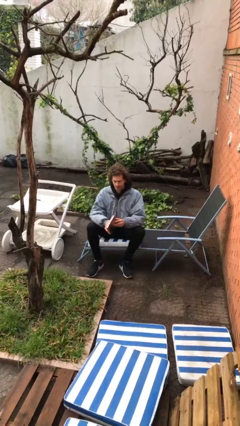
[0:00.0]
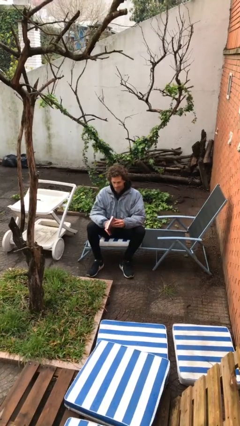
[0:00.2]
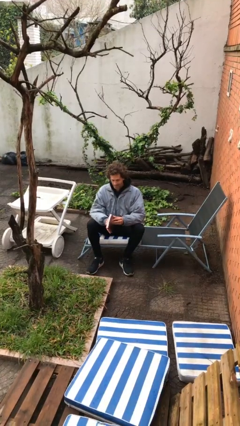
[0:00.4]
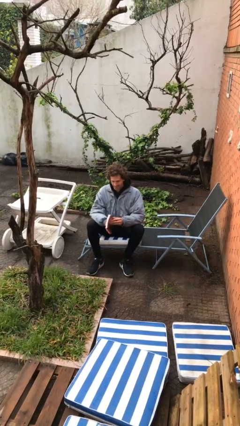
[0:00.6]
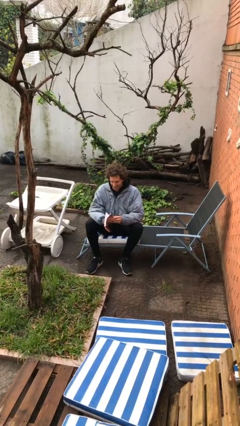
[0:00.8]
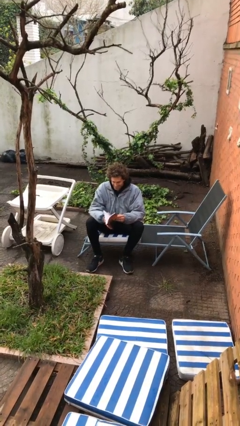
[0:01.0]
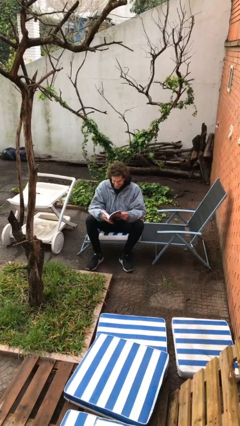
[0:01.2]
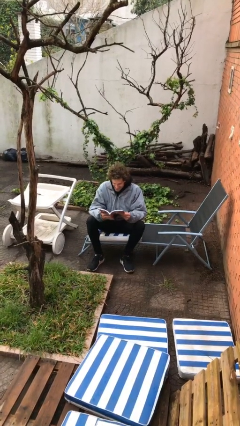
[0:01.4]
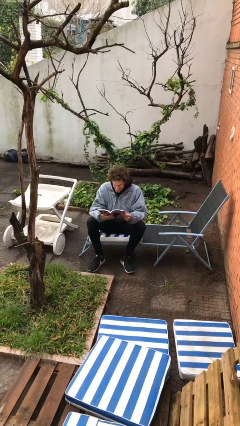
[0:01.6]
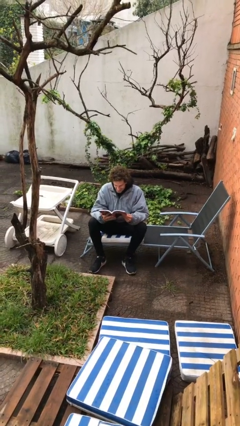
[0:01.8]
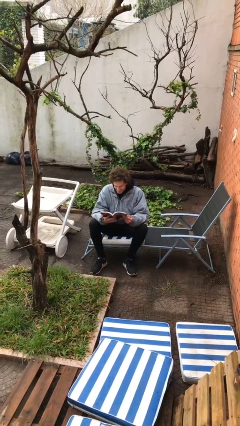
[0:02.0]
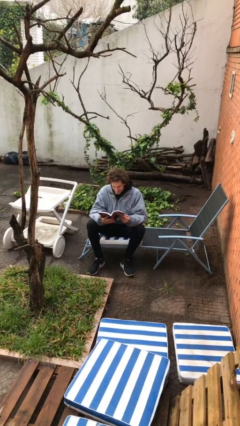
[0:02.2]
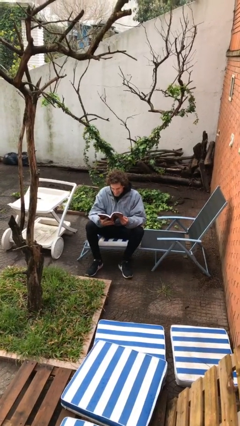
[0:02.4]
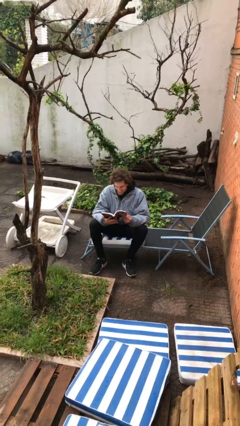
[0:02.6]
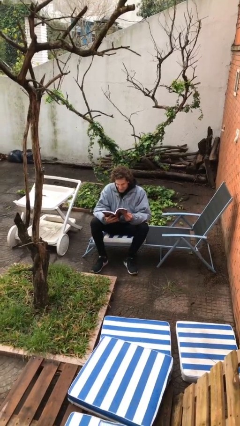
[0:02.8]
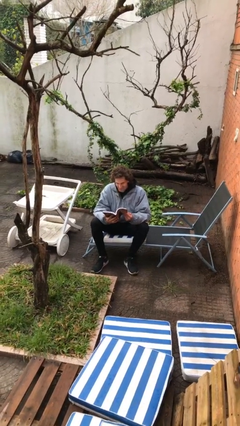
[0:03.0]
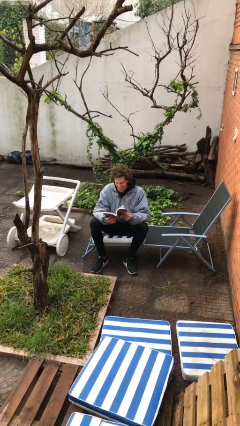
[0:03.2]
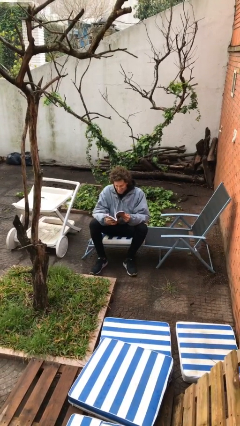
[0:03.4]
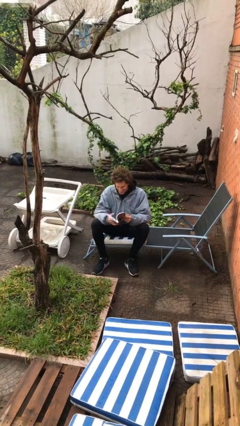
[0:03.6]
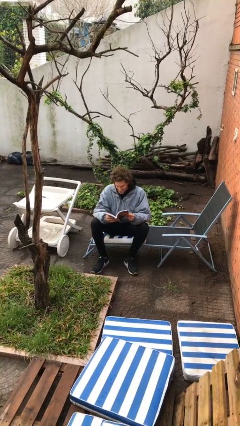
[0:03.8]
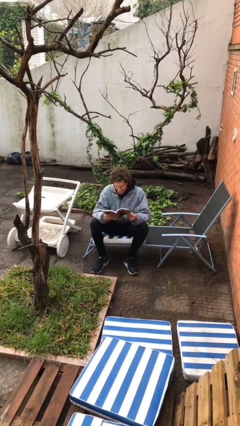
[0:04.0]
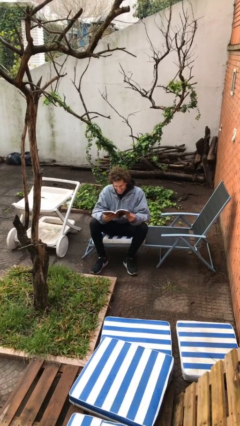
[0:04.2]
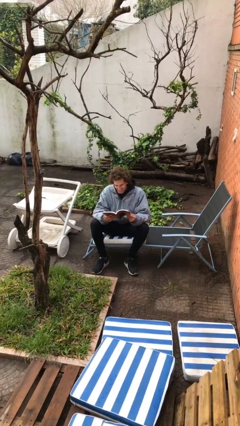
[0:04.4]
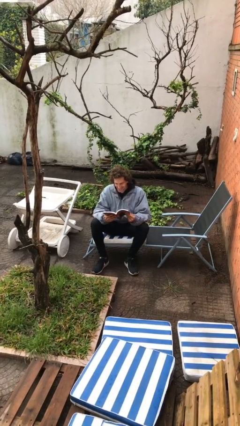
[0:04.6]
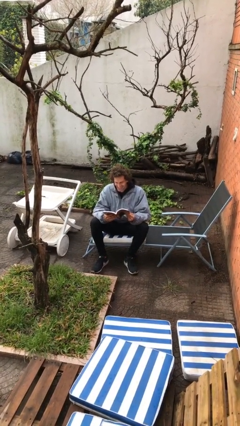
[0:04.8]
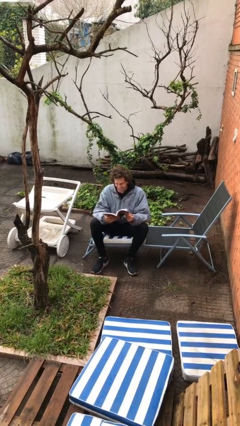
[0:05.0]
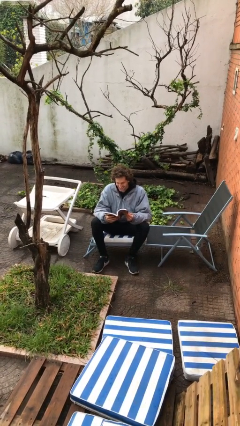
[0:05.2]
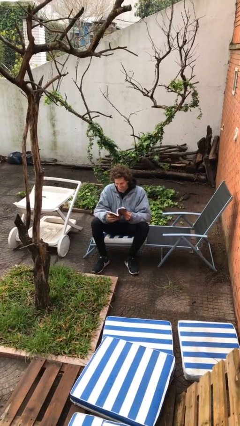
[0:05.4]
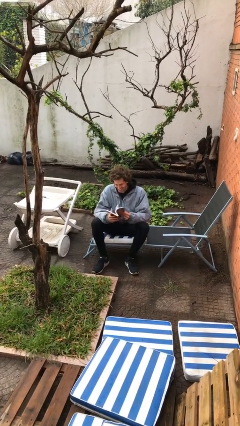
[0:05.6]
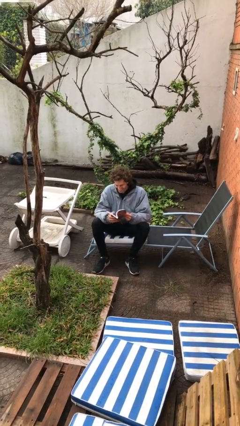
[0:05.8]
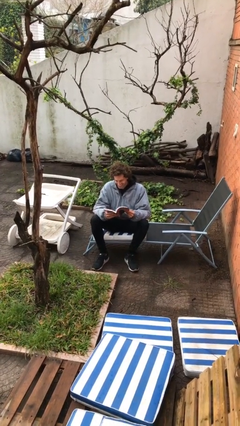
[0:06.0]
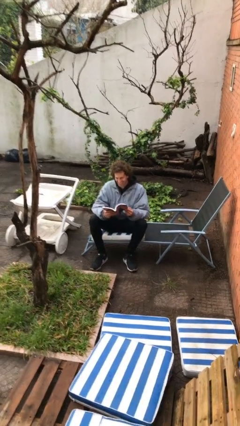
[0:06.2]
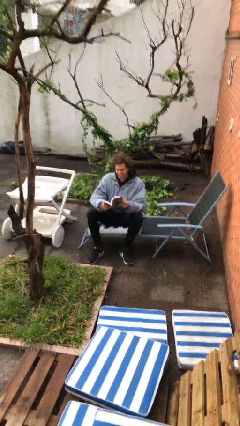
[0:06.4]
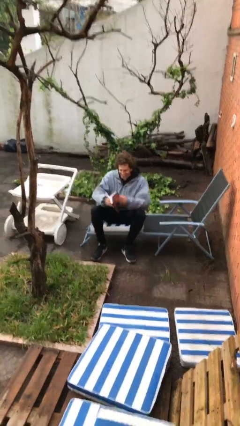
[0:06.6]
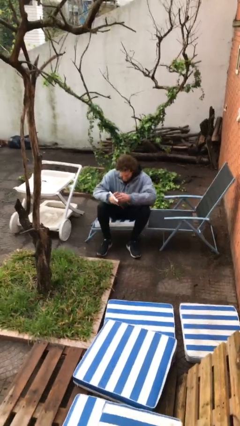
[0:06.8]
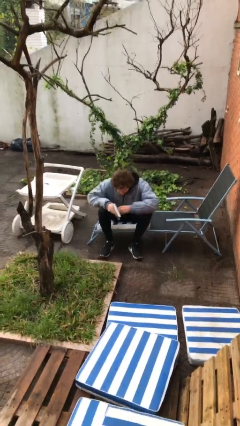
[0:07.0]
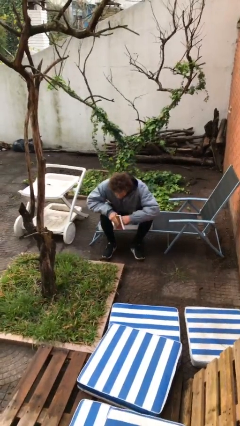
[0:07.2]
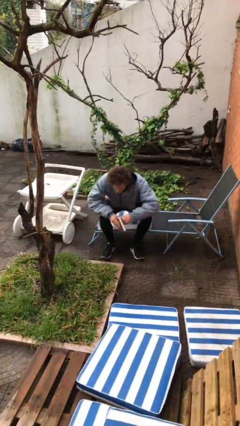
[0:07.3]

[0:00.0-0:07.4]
person reads document

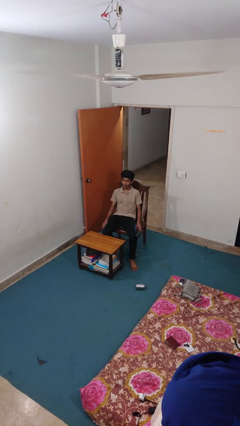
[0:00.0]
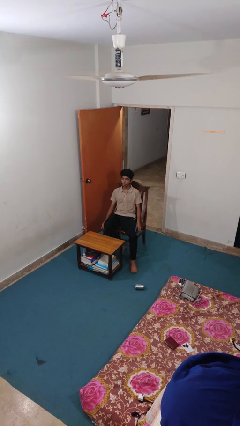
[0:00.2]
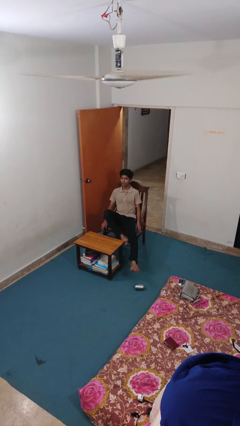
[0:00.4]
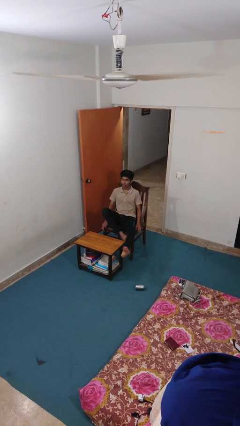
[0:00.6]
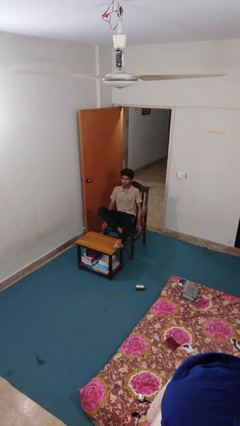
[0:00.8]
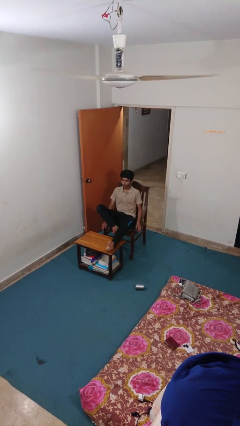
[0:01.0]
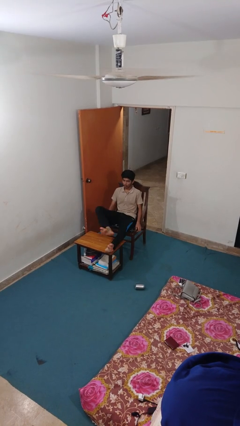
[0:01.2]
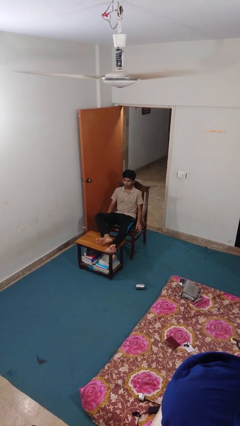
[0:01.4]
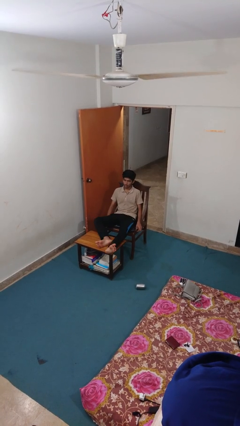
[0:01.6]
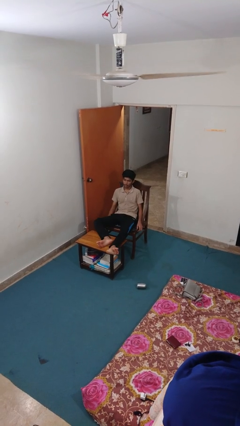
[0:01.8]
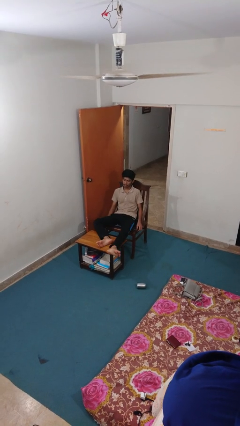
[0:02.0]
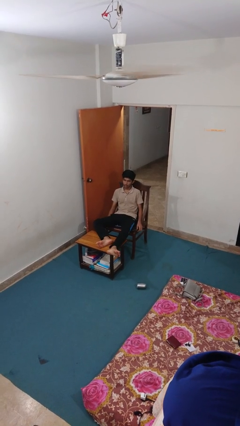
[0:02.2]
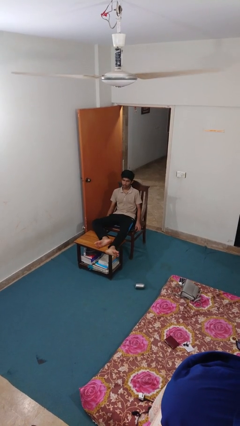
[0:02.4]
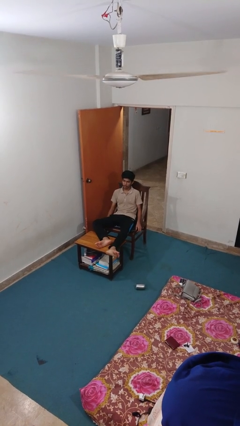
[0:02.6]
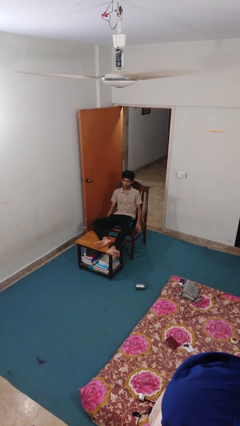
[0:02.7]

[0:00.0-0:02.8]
person puts feet up

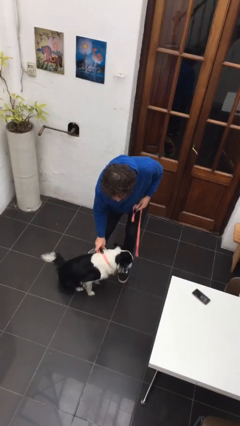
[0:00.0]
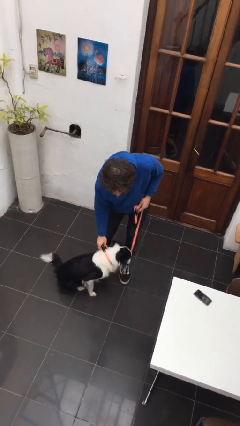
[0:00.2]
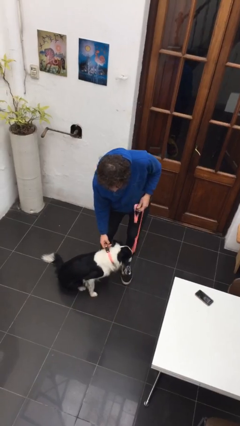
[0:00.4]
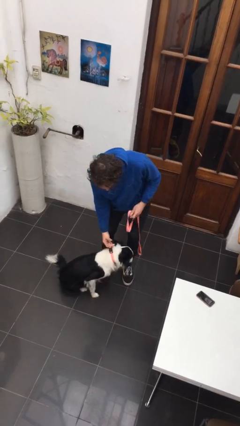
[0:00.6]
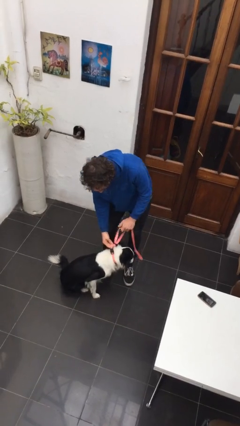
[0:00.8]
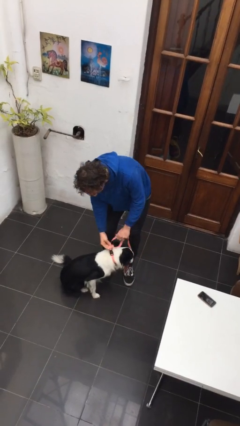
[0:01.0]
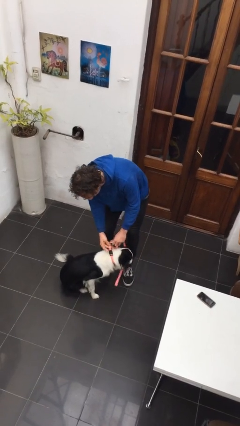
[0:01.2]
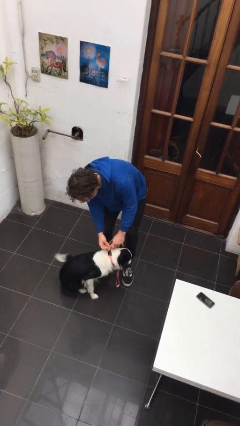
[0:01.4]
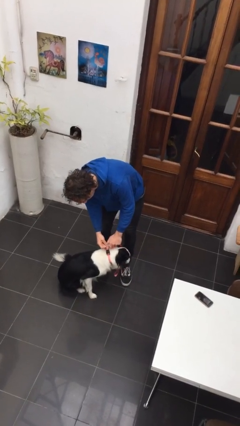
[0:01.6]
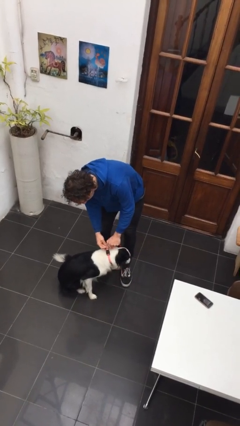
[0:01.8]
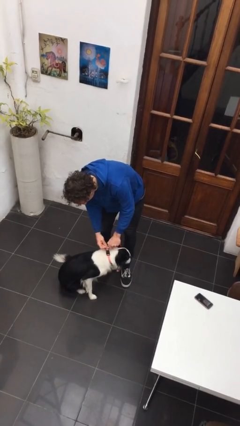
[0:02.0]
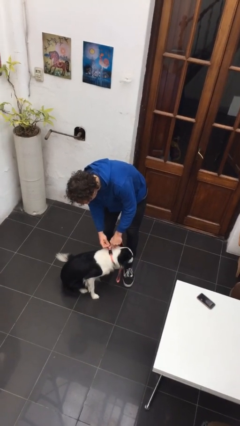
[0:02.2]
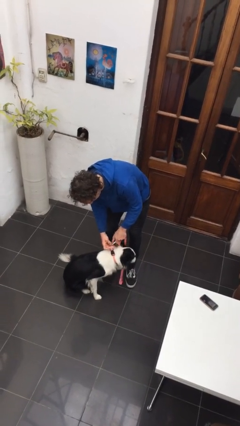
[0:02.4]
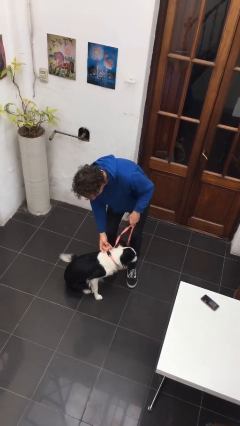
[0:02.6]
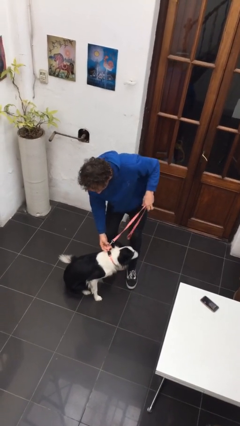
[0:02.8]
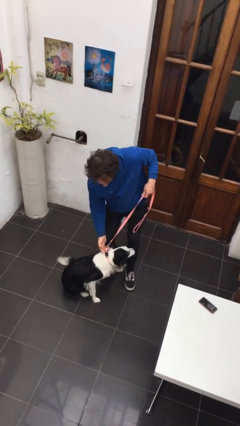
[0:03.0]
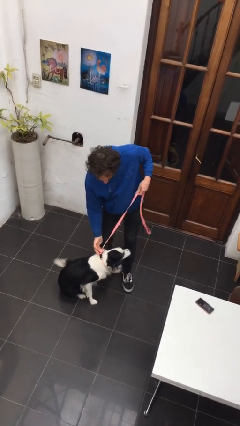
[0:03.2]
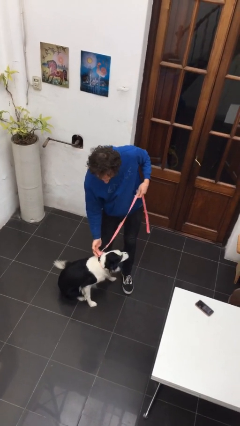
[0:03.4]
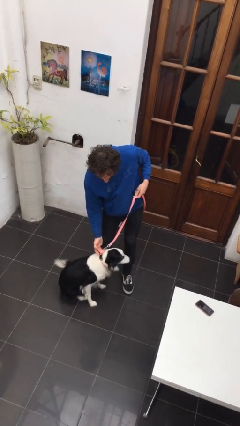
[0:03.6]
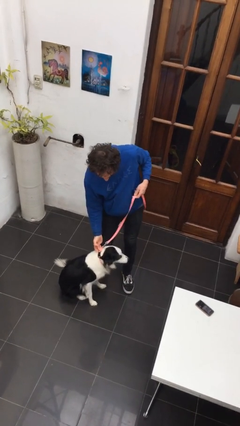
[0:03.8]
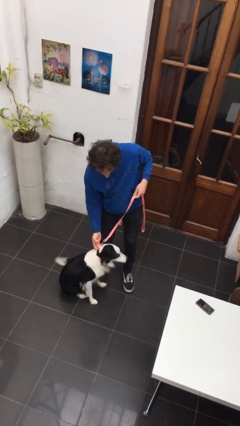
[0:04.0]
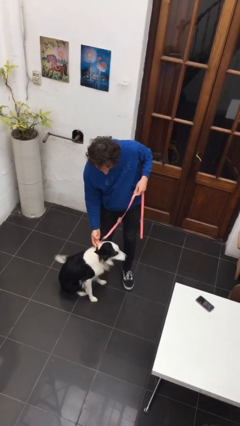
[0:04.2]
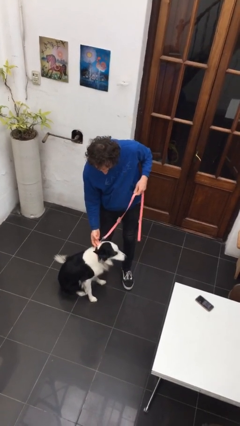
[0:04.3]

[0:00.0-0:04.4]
person attaches leash to dog

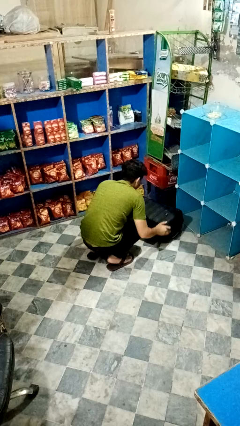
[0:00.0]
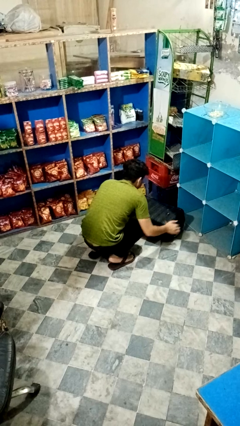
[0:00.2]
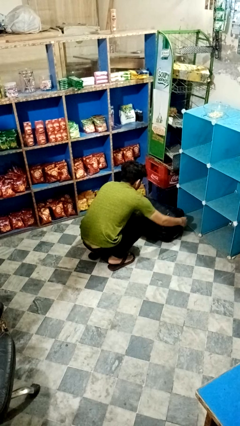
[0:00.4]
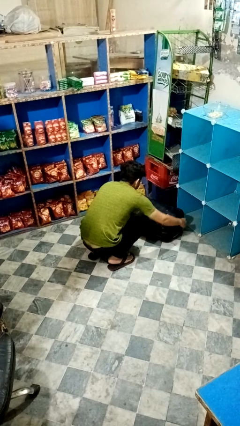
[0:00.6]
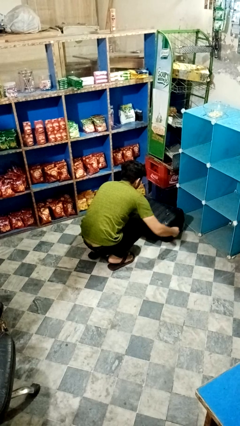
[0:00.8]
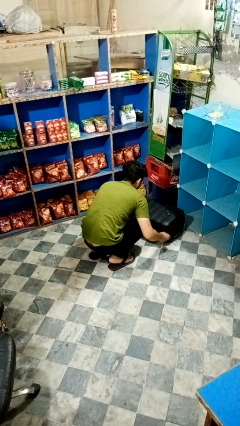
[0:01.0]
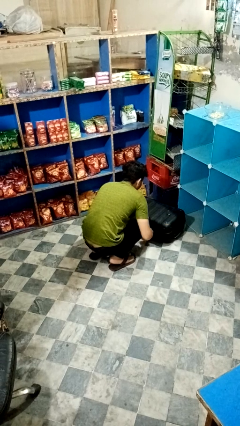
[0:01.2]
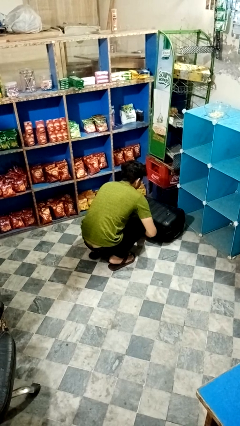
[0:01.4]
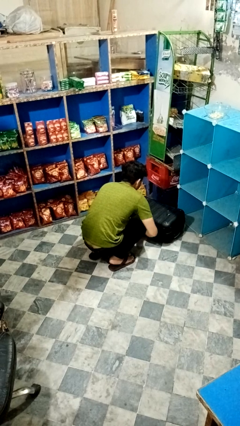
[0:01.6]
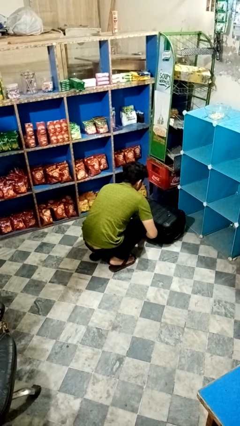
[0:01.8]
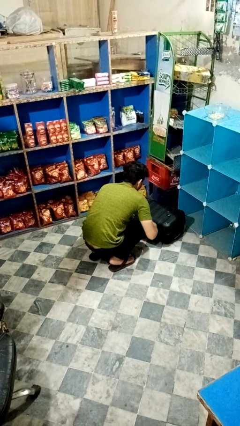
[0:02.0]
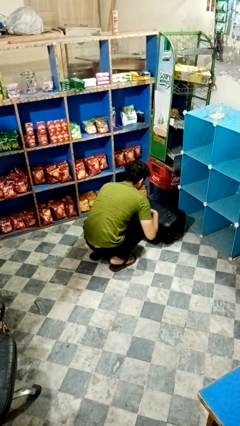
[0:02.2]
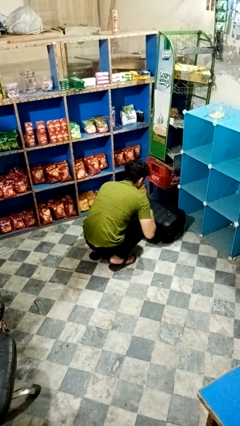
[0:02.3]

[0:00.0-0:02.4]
person closes suitcase

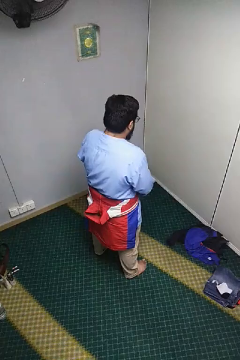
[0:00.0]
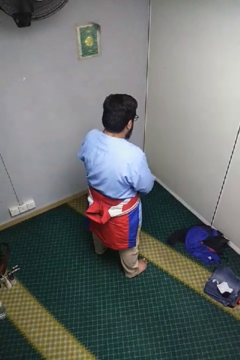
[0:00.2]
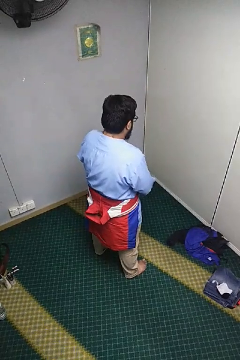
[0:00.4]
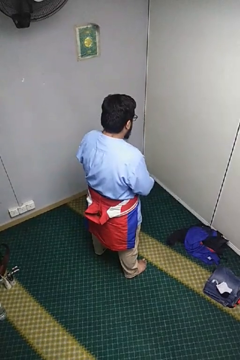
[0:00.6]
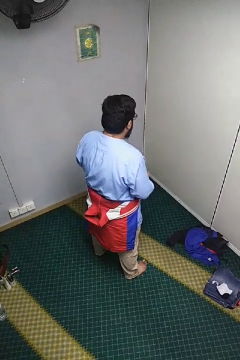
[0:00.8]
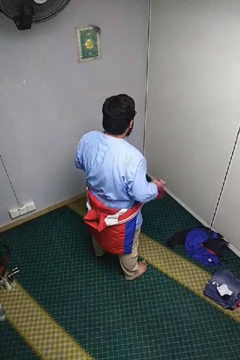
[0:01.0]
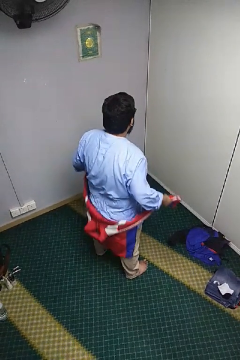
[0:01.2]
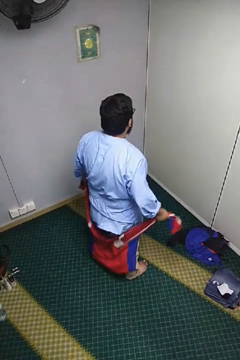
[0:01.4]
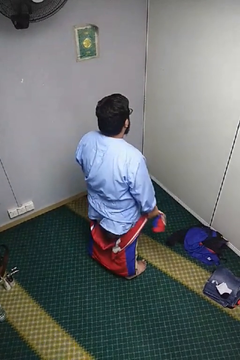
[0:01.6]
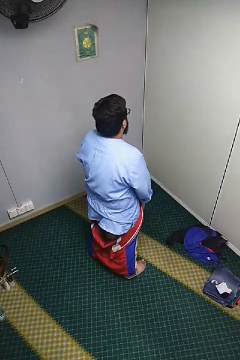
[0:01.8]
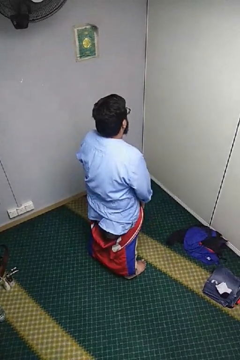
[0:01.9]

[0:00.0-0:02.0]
person unties jacket around waist
